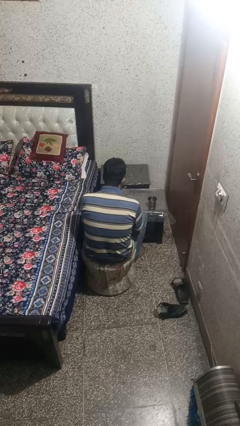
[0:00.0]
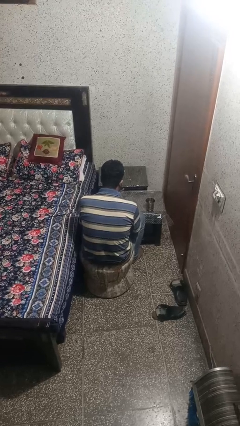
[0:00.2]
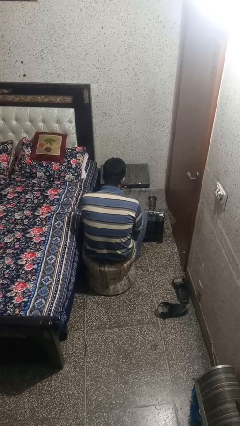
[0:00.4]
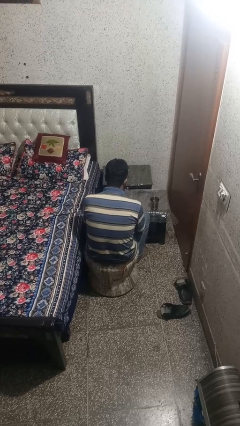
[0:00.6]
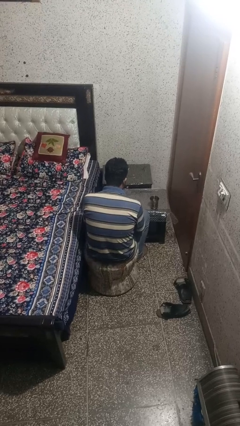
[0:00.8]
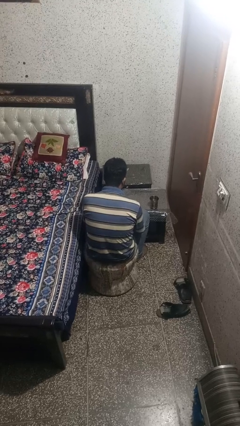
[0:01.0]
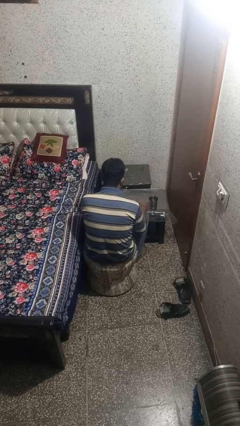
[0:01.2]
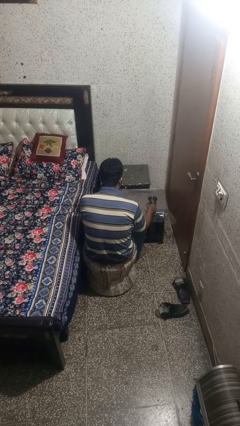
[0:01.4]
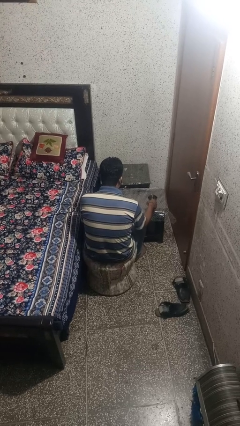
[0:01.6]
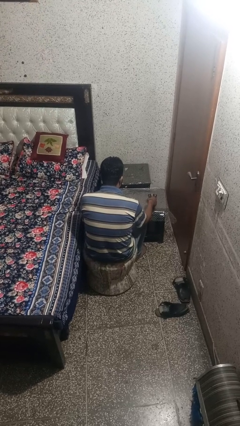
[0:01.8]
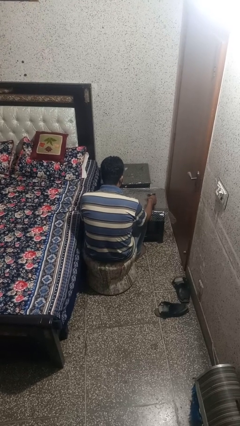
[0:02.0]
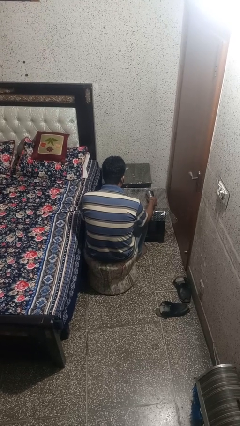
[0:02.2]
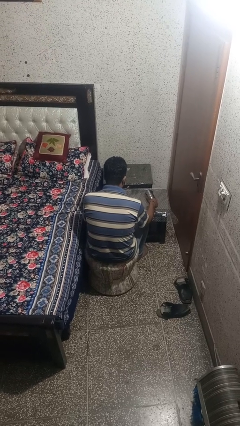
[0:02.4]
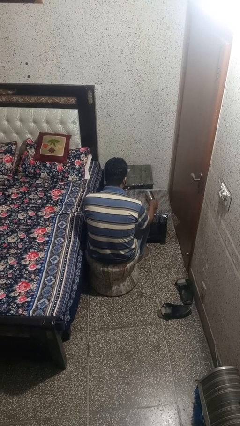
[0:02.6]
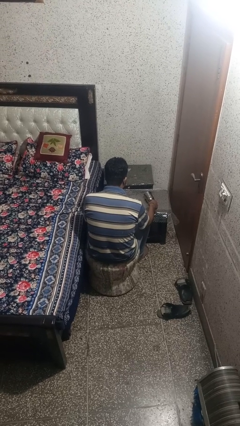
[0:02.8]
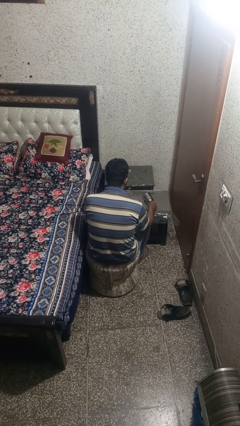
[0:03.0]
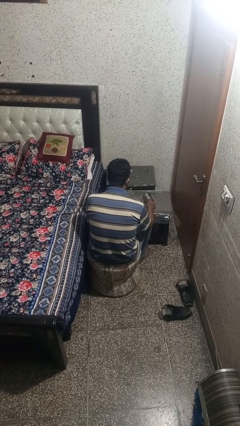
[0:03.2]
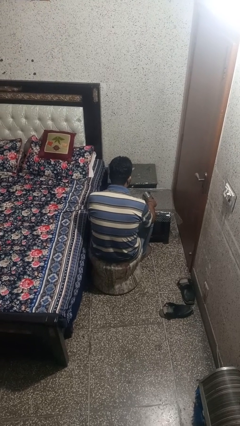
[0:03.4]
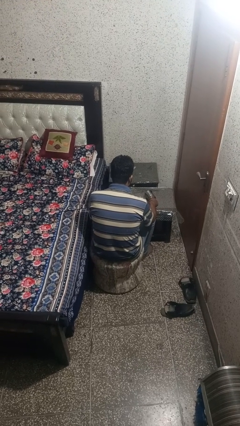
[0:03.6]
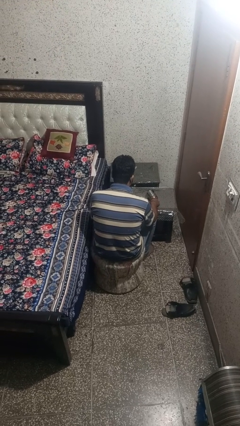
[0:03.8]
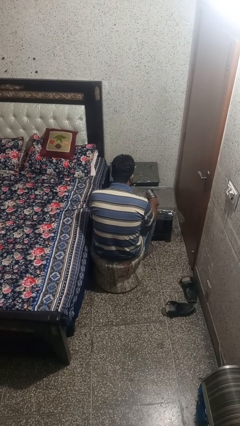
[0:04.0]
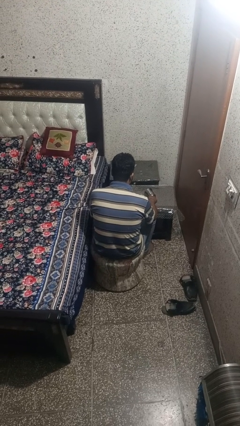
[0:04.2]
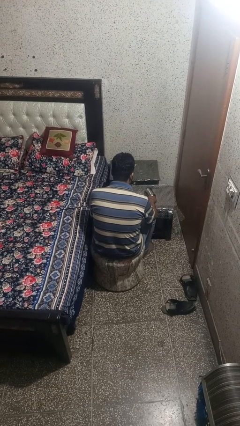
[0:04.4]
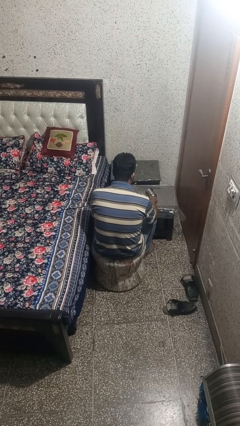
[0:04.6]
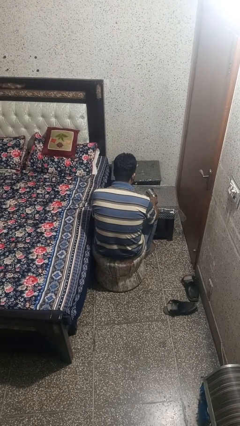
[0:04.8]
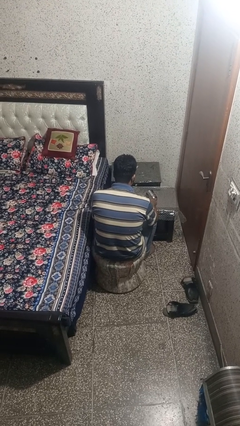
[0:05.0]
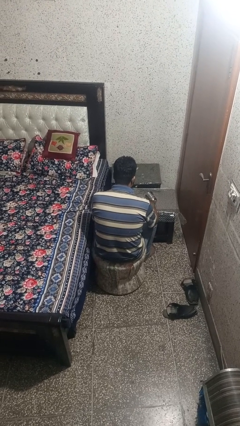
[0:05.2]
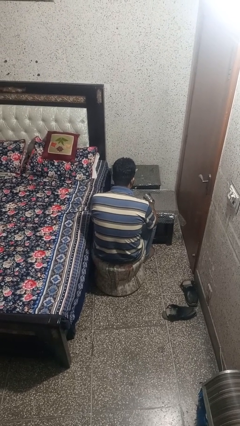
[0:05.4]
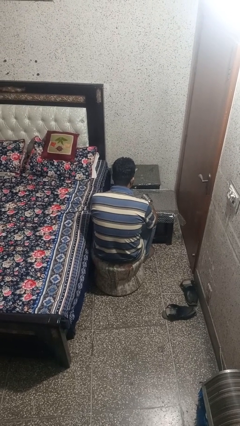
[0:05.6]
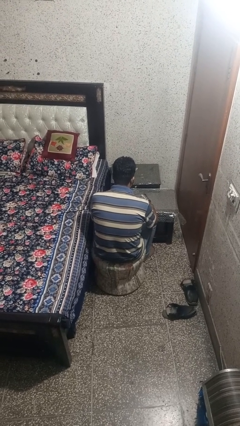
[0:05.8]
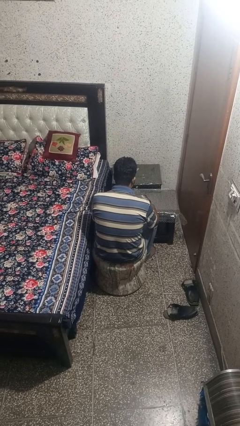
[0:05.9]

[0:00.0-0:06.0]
person knocks over glass

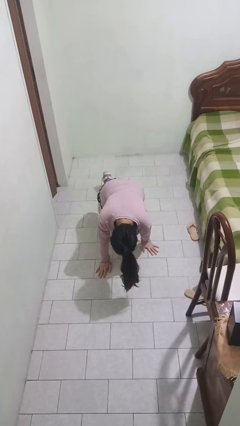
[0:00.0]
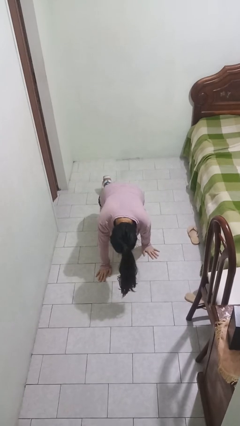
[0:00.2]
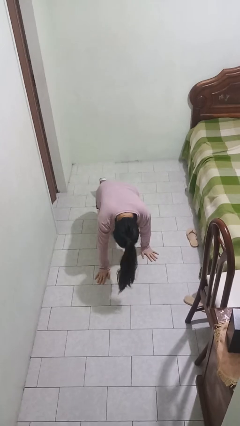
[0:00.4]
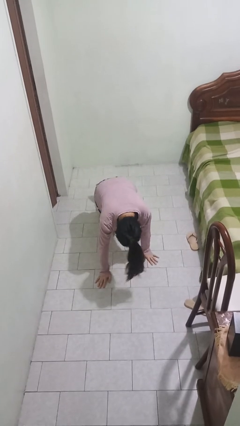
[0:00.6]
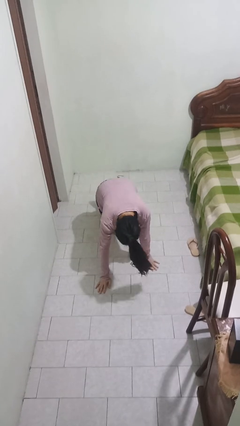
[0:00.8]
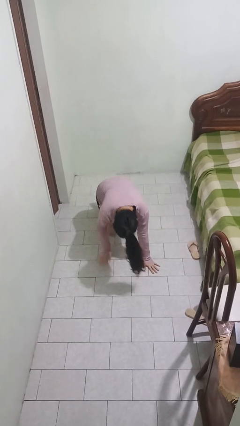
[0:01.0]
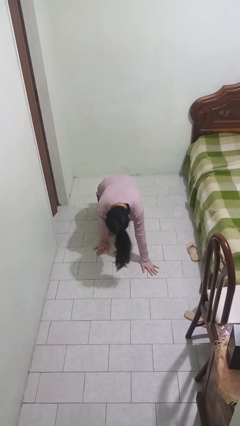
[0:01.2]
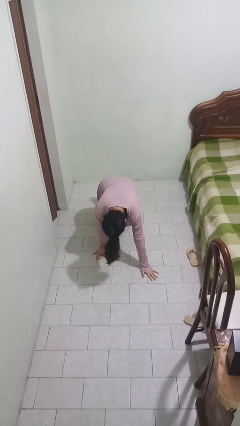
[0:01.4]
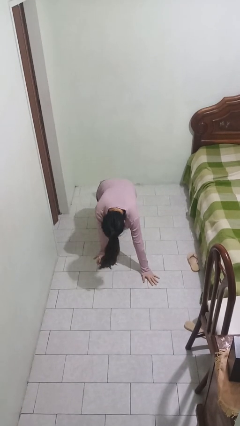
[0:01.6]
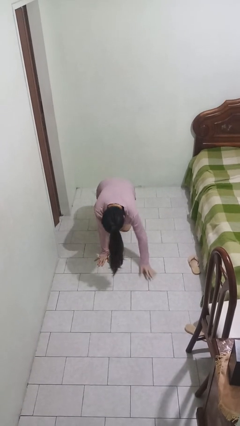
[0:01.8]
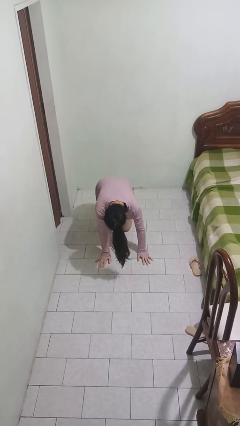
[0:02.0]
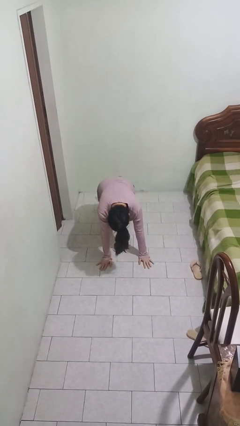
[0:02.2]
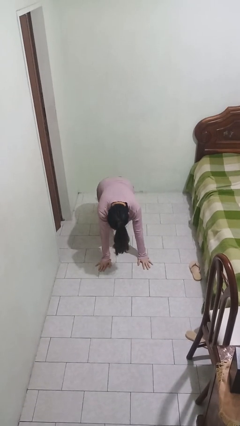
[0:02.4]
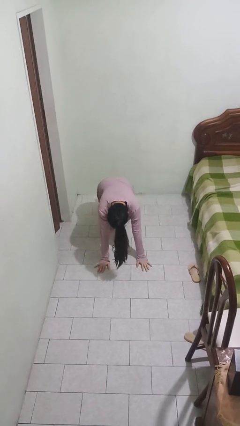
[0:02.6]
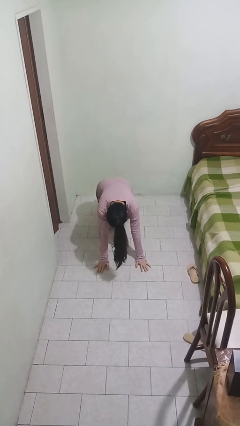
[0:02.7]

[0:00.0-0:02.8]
person crawls

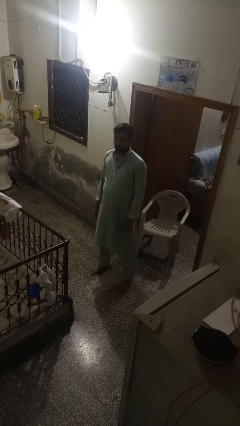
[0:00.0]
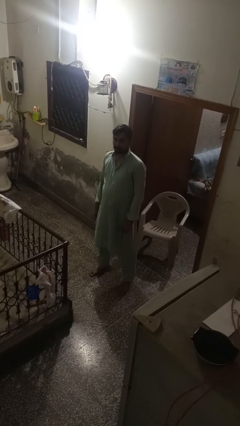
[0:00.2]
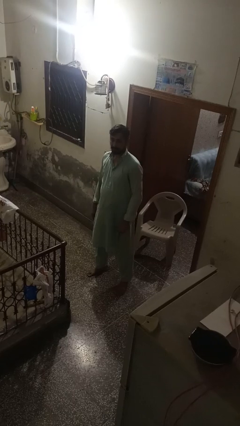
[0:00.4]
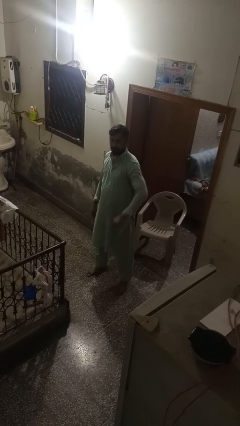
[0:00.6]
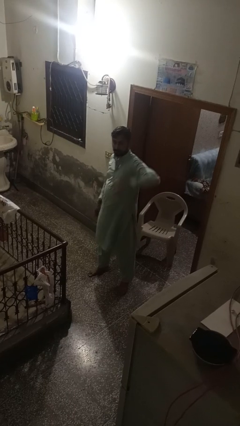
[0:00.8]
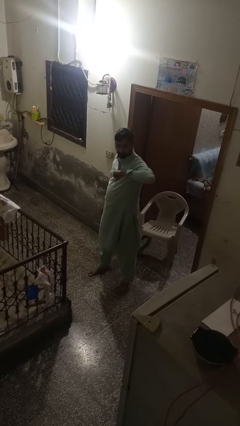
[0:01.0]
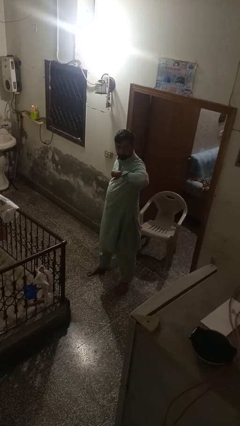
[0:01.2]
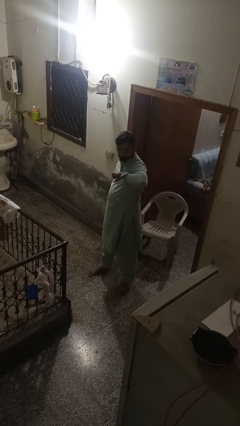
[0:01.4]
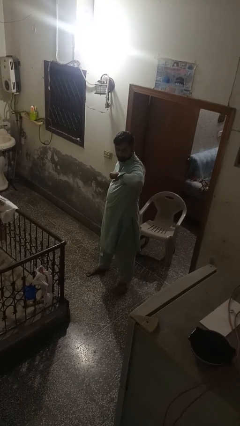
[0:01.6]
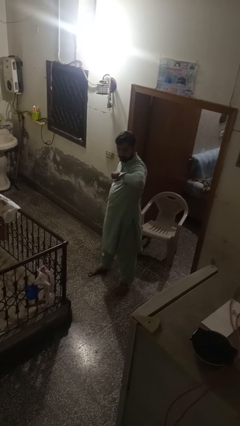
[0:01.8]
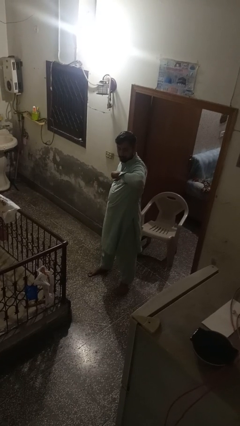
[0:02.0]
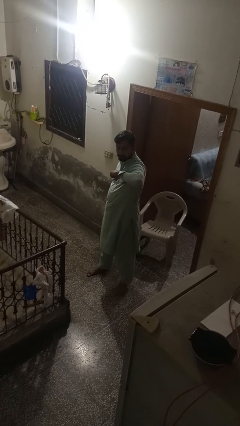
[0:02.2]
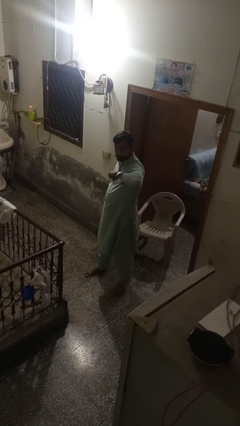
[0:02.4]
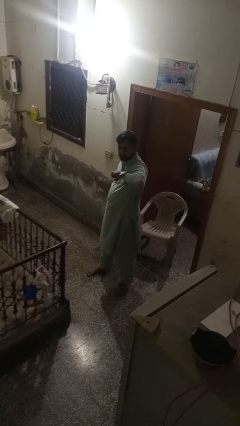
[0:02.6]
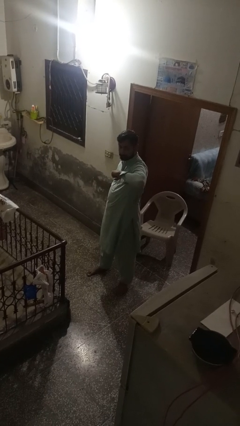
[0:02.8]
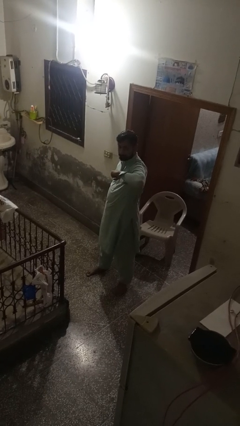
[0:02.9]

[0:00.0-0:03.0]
person karate chop

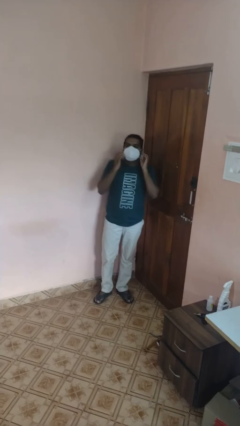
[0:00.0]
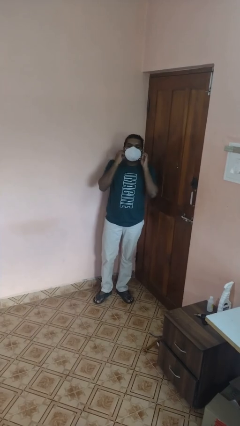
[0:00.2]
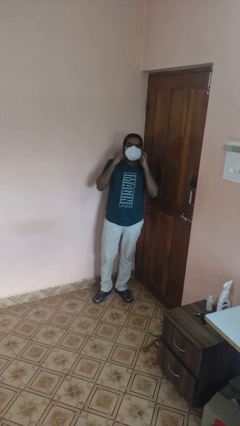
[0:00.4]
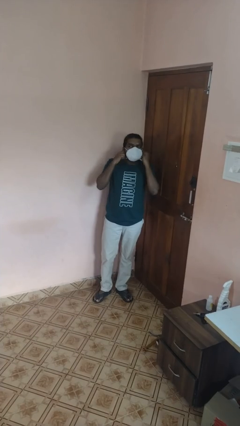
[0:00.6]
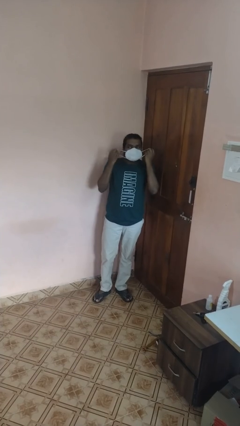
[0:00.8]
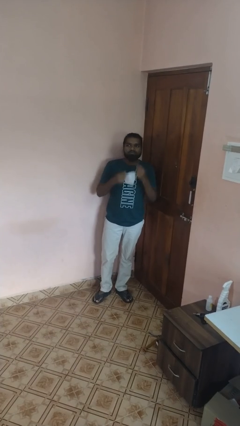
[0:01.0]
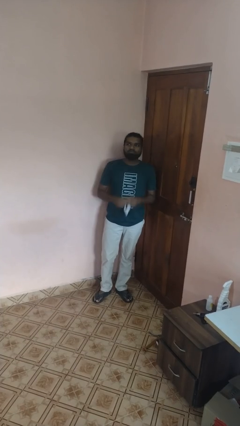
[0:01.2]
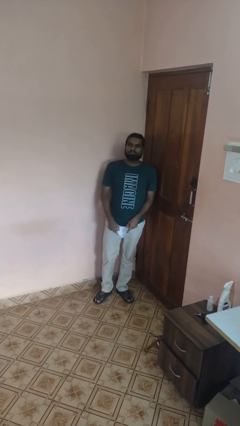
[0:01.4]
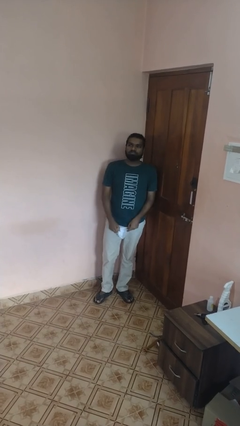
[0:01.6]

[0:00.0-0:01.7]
person takes off facemask

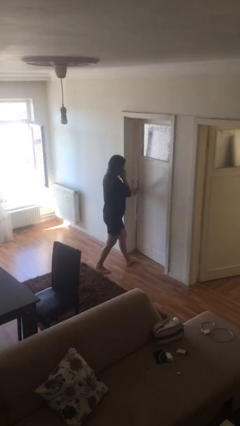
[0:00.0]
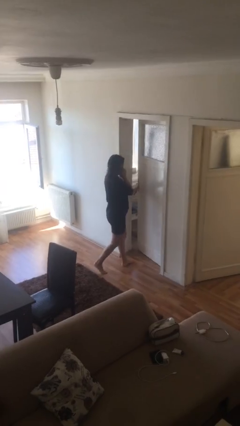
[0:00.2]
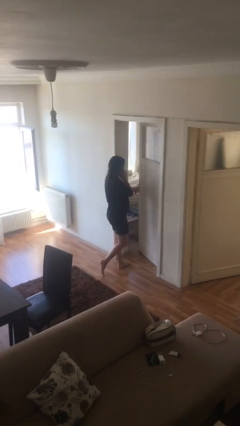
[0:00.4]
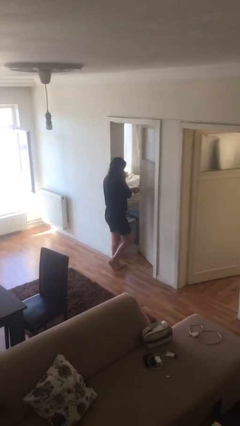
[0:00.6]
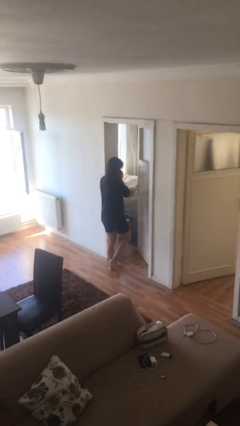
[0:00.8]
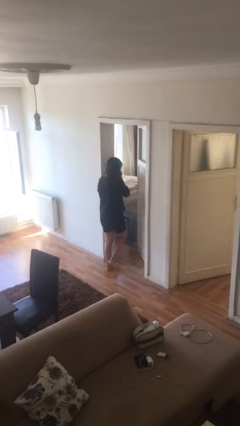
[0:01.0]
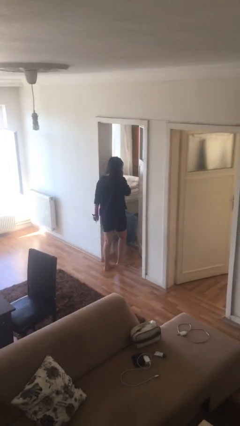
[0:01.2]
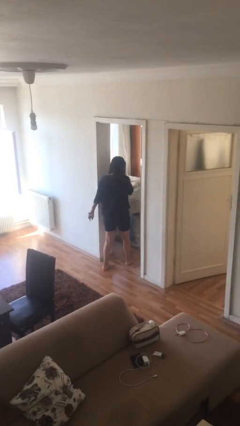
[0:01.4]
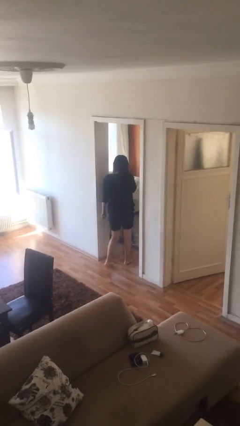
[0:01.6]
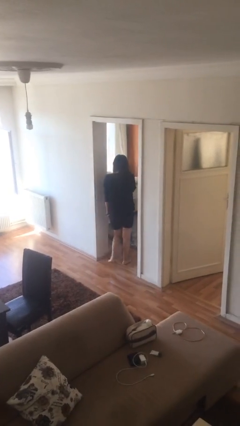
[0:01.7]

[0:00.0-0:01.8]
person opens facility door

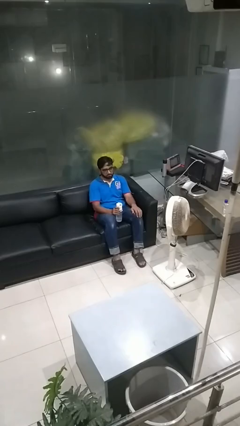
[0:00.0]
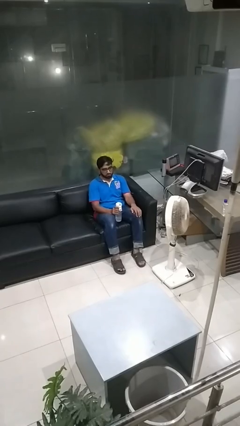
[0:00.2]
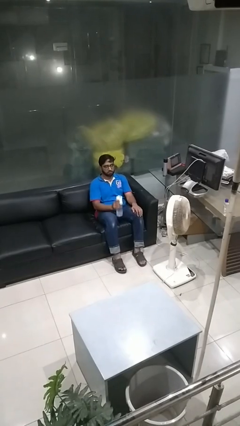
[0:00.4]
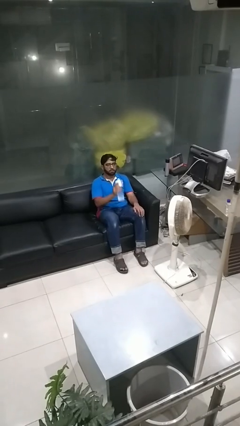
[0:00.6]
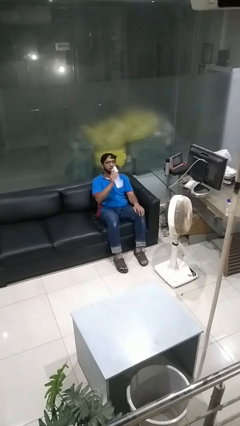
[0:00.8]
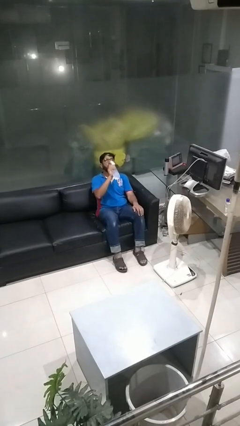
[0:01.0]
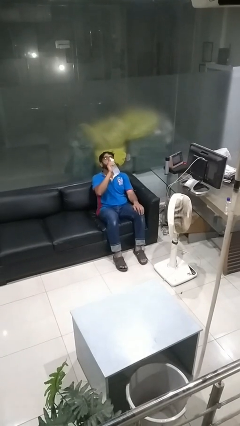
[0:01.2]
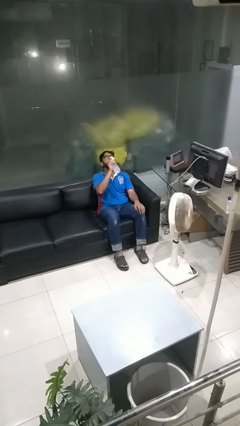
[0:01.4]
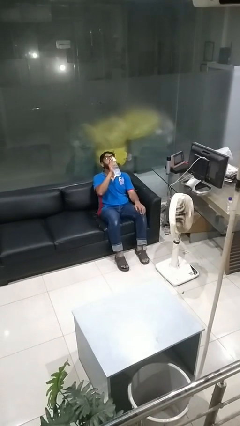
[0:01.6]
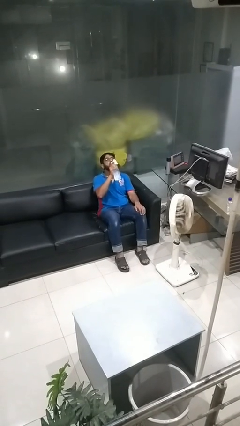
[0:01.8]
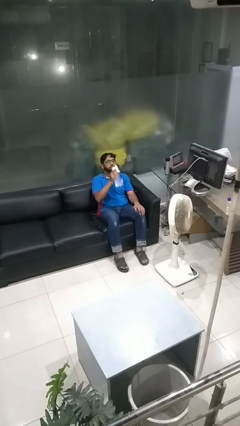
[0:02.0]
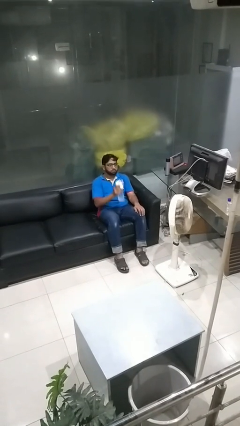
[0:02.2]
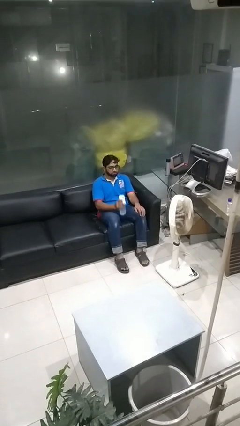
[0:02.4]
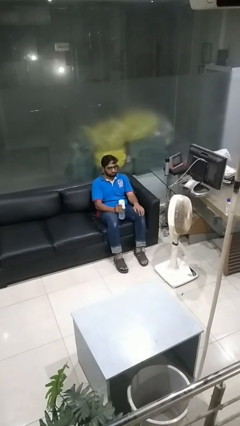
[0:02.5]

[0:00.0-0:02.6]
person drinks from bottle
